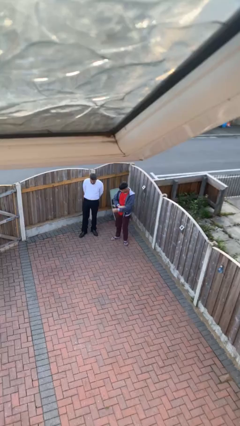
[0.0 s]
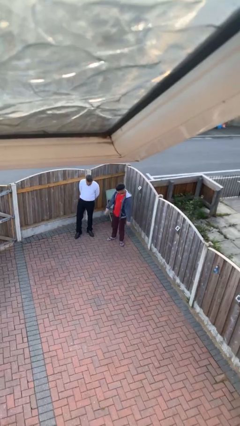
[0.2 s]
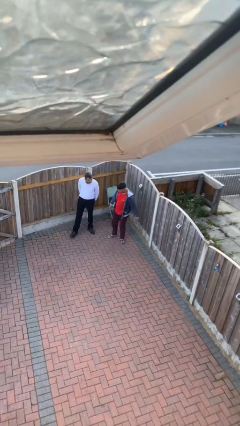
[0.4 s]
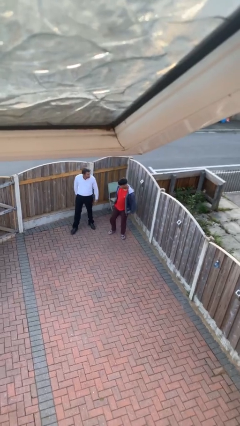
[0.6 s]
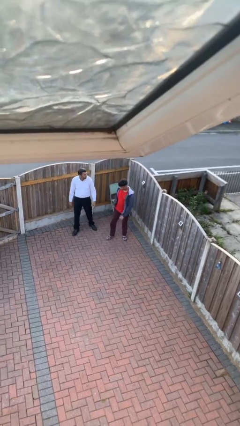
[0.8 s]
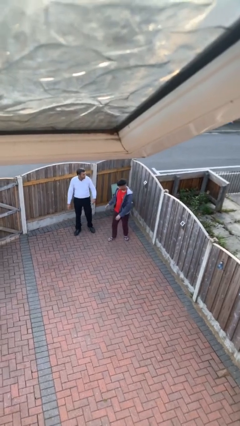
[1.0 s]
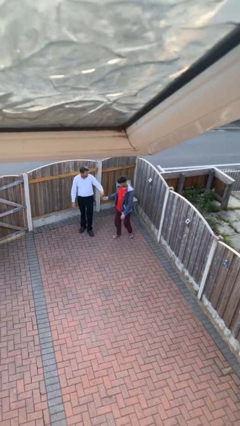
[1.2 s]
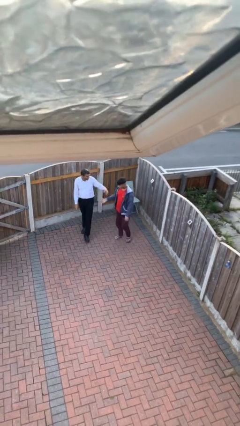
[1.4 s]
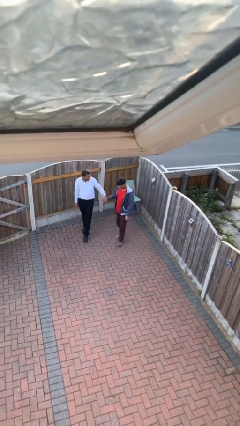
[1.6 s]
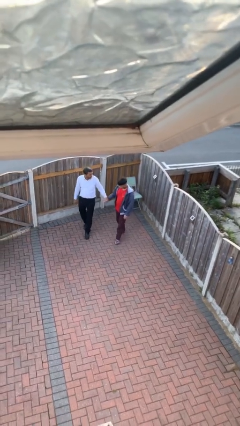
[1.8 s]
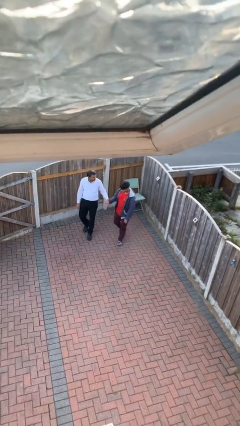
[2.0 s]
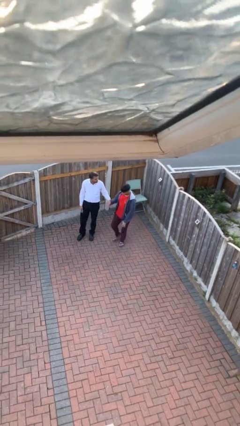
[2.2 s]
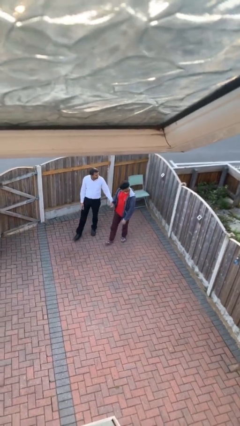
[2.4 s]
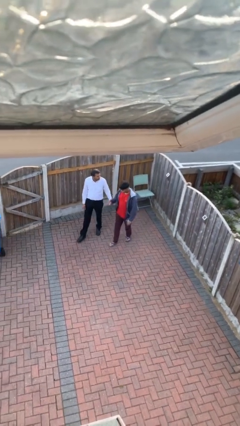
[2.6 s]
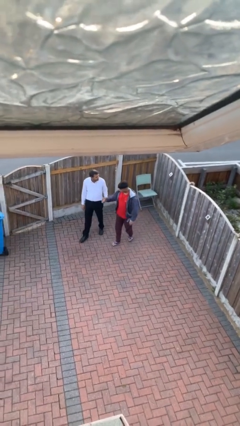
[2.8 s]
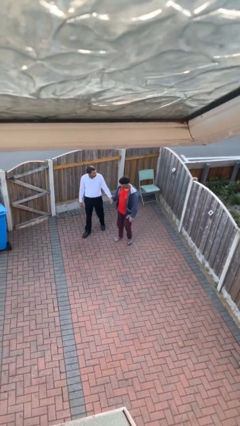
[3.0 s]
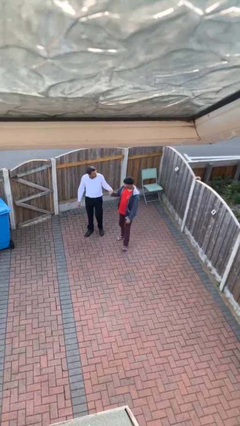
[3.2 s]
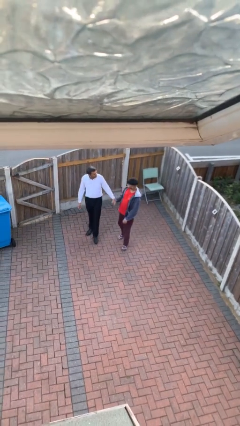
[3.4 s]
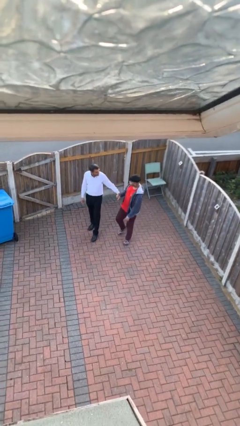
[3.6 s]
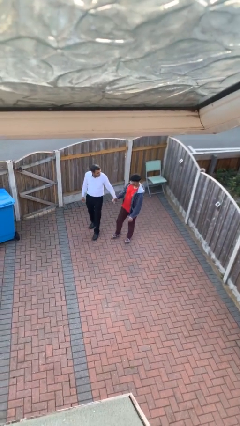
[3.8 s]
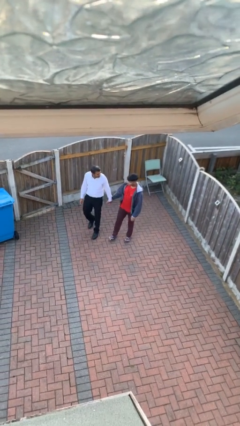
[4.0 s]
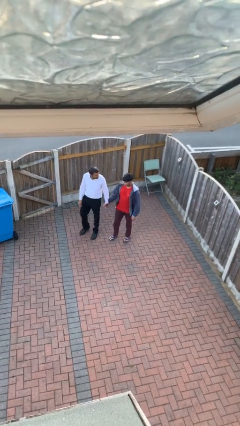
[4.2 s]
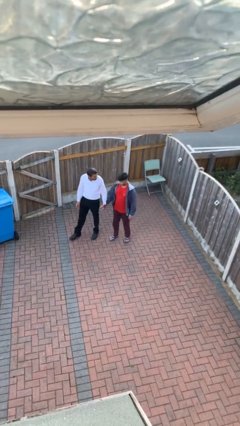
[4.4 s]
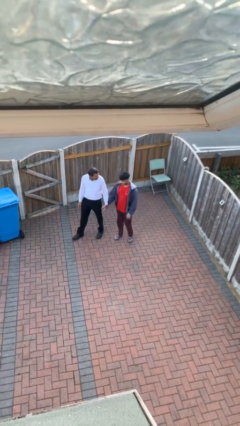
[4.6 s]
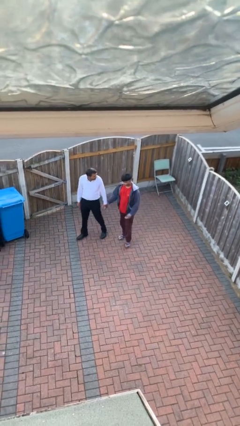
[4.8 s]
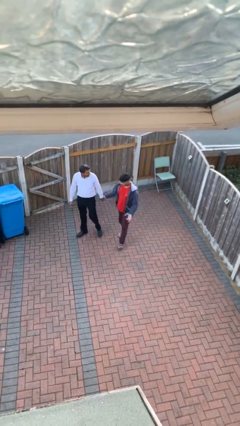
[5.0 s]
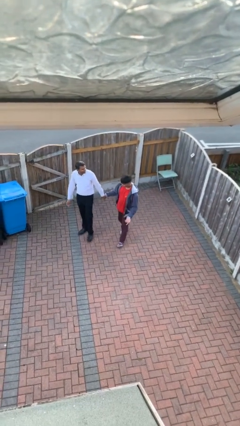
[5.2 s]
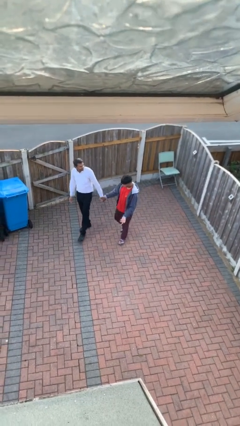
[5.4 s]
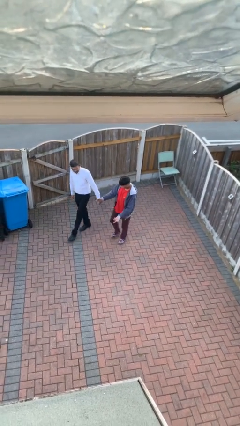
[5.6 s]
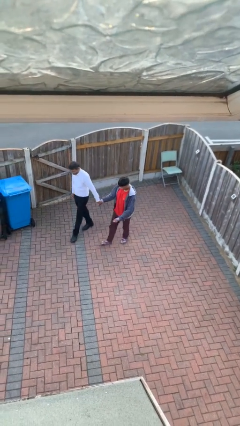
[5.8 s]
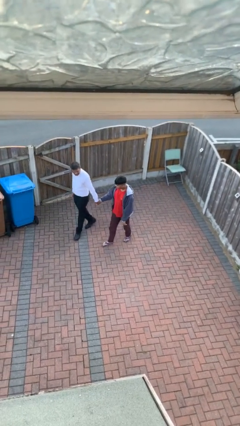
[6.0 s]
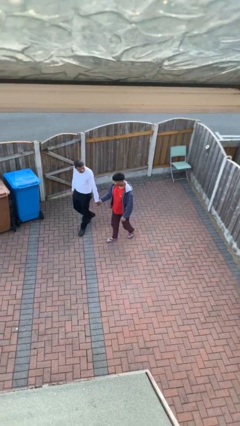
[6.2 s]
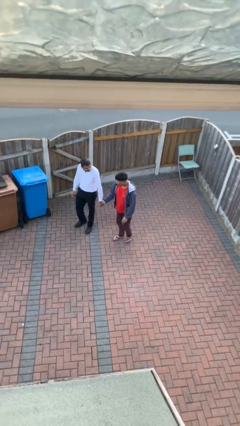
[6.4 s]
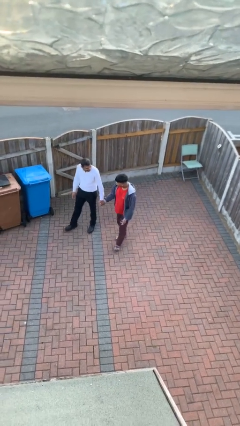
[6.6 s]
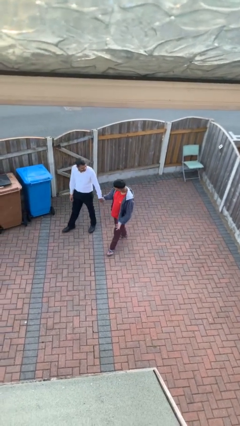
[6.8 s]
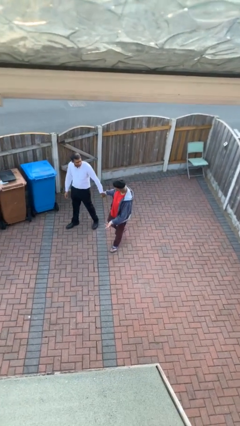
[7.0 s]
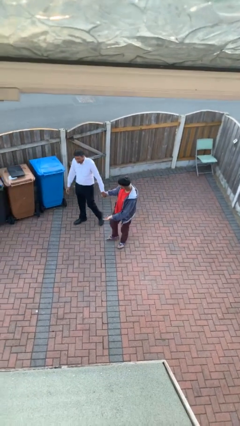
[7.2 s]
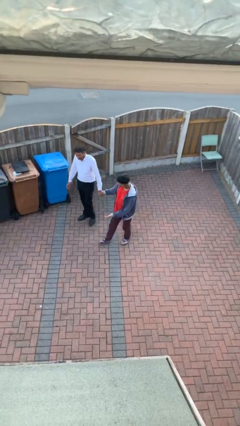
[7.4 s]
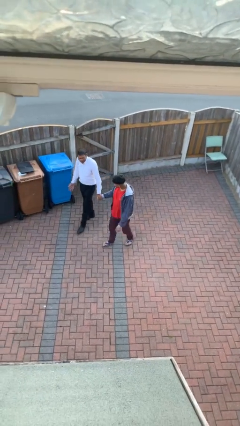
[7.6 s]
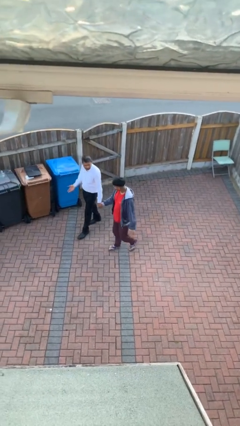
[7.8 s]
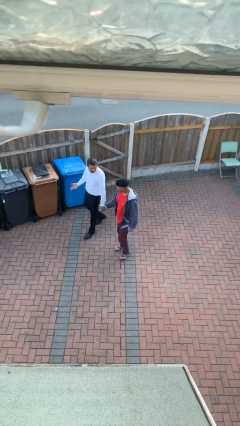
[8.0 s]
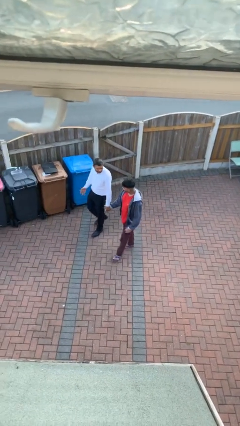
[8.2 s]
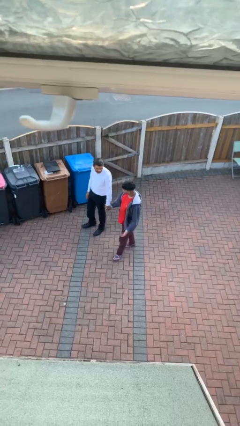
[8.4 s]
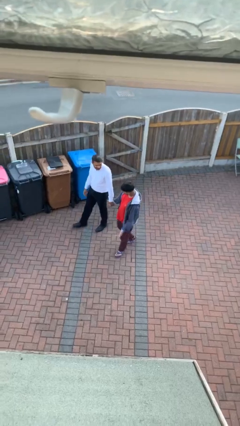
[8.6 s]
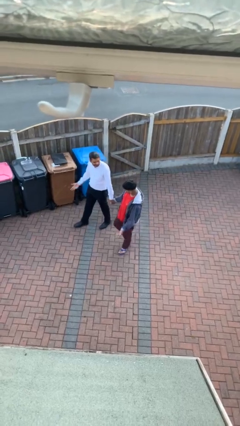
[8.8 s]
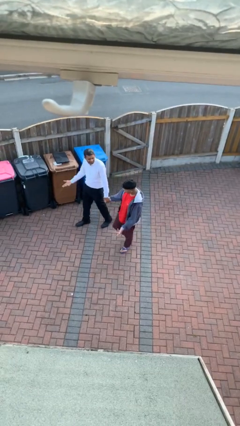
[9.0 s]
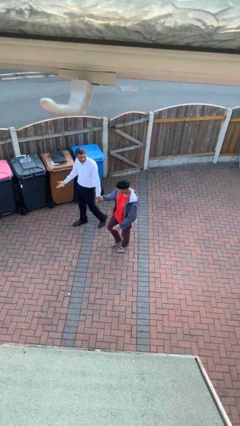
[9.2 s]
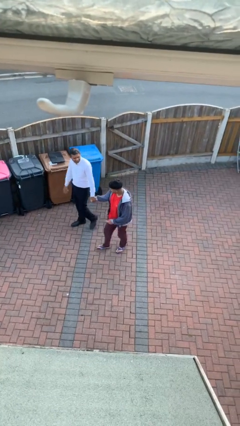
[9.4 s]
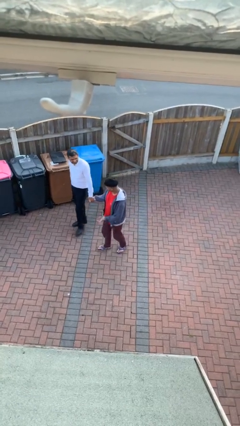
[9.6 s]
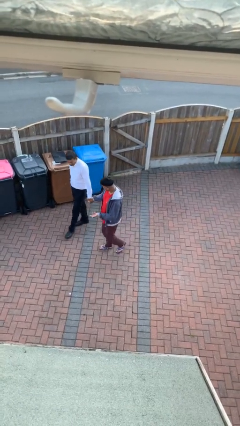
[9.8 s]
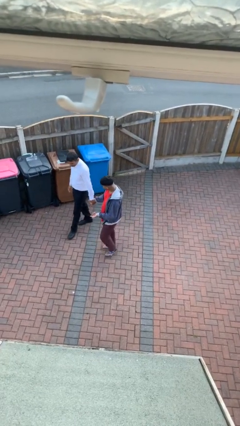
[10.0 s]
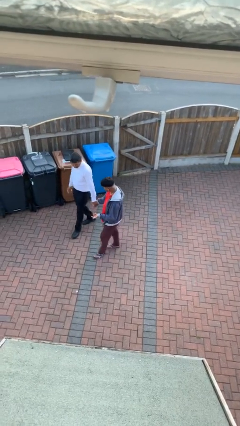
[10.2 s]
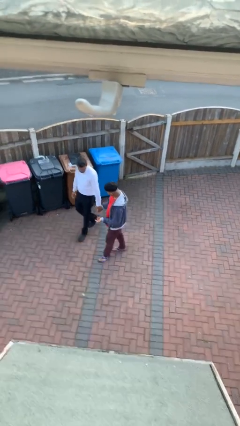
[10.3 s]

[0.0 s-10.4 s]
person holds hand

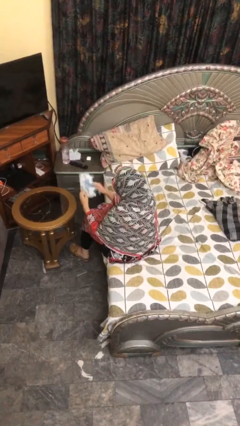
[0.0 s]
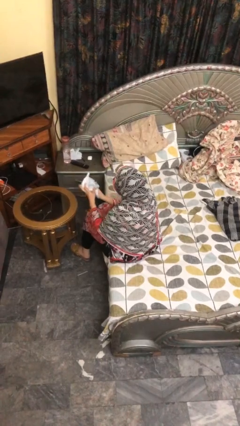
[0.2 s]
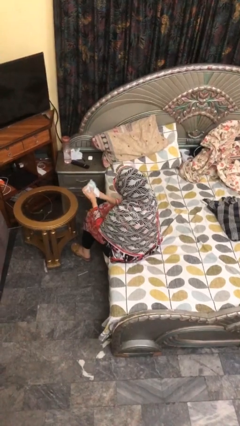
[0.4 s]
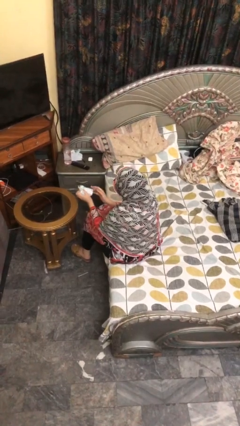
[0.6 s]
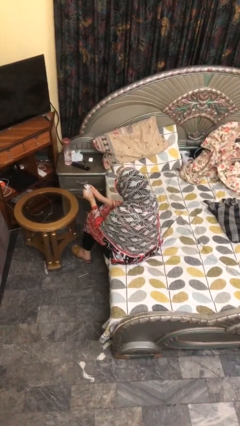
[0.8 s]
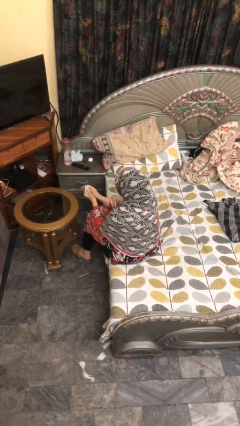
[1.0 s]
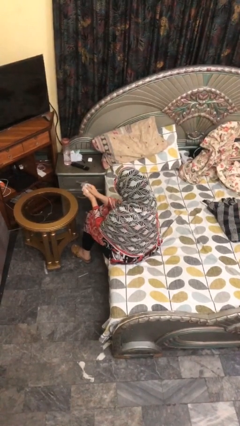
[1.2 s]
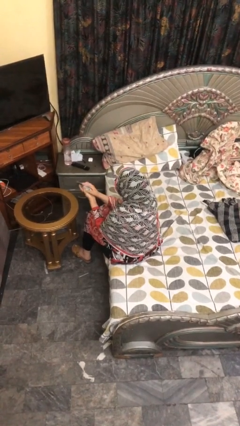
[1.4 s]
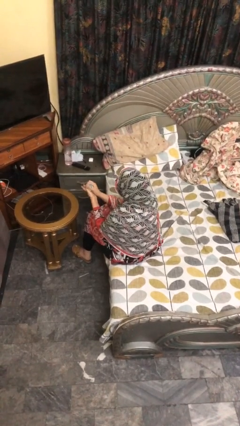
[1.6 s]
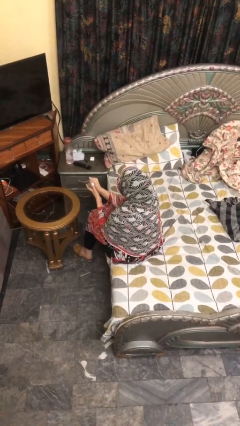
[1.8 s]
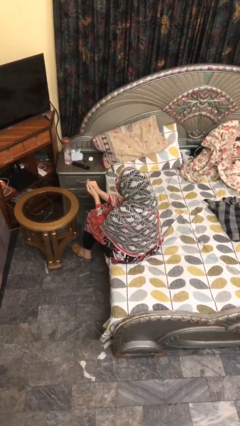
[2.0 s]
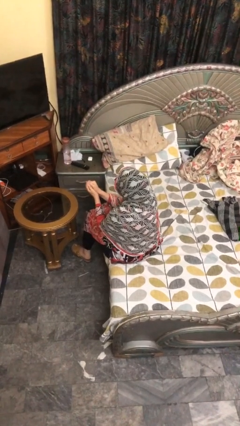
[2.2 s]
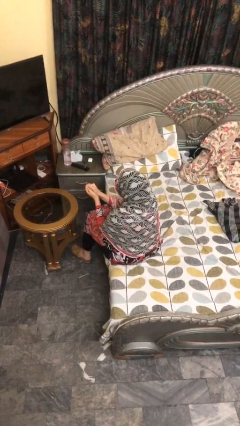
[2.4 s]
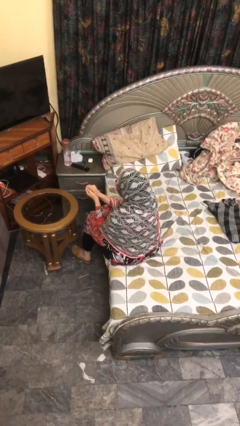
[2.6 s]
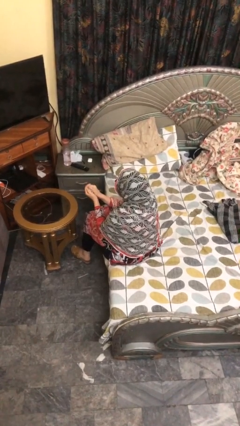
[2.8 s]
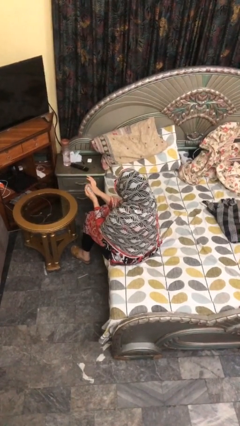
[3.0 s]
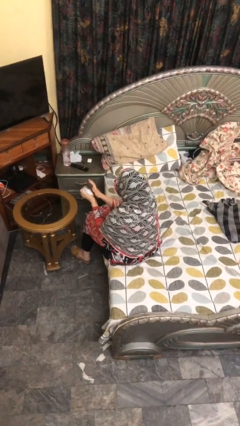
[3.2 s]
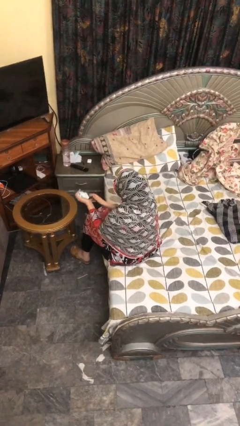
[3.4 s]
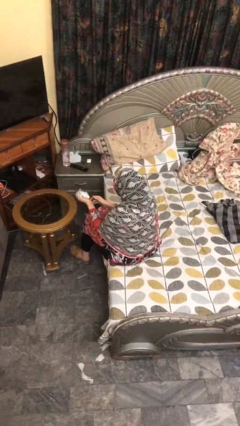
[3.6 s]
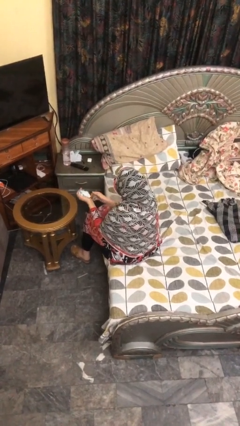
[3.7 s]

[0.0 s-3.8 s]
person crumples paper

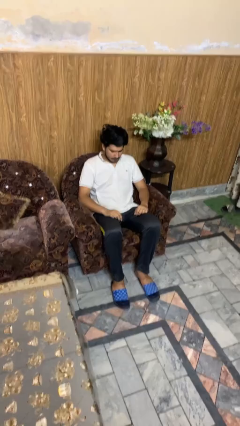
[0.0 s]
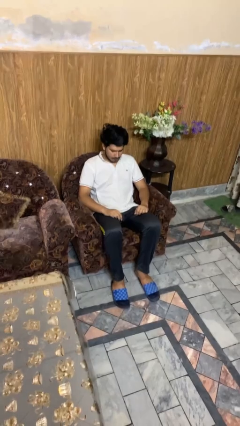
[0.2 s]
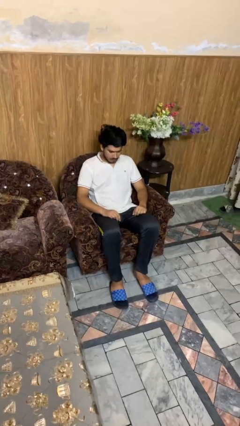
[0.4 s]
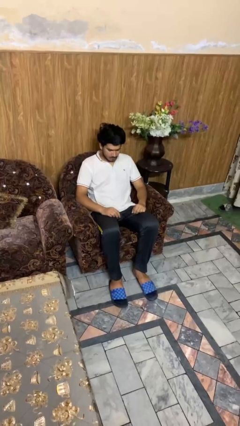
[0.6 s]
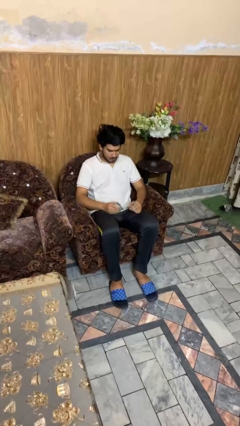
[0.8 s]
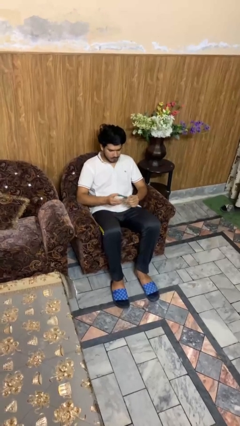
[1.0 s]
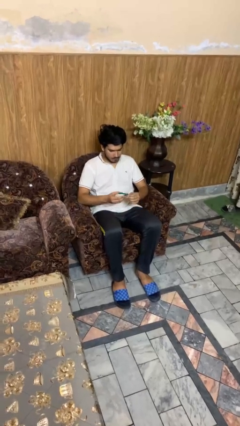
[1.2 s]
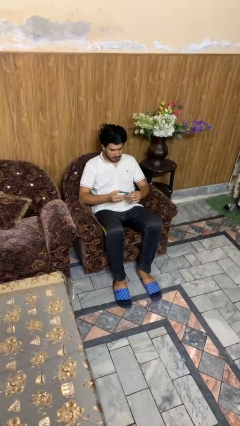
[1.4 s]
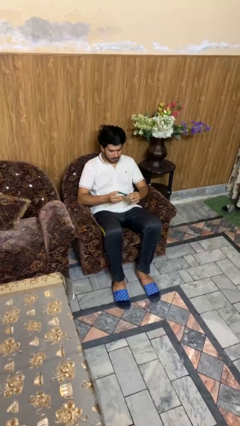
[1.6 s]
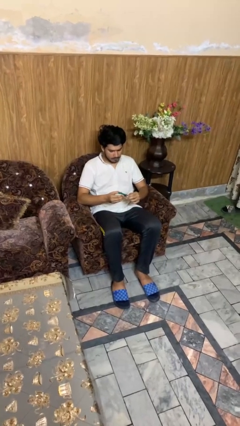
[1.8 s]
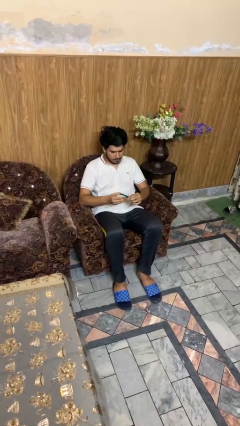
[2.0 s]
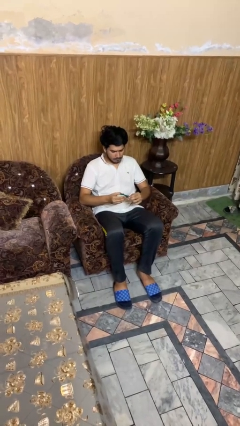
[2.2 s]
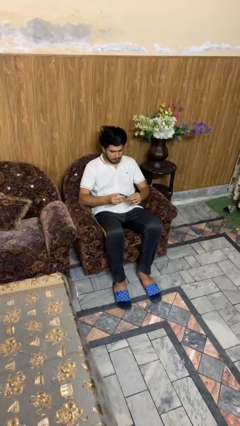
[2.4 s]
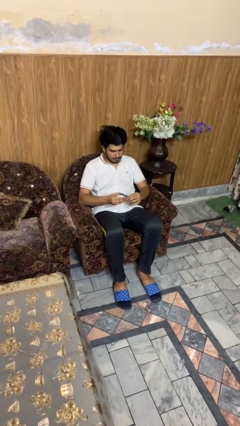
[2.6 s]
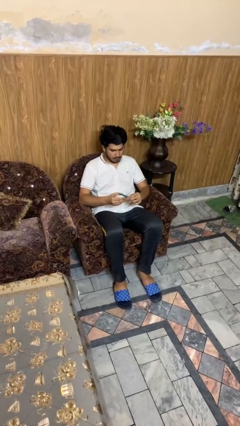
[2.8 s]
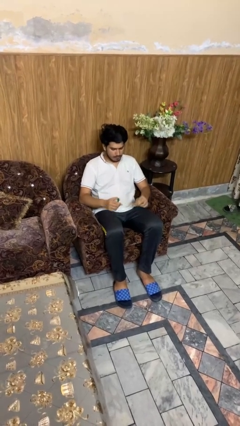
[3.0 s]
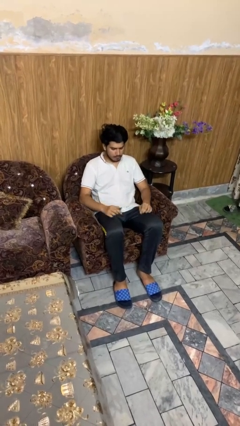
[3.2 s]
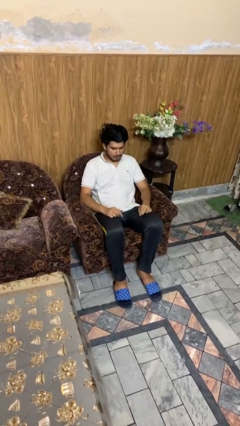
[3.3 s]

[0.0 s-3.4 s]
person clips fingernails

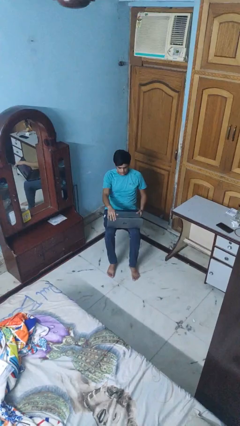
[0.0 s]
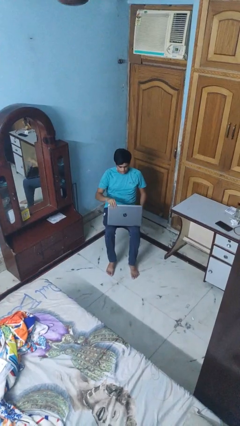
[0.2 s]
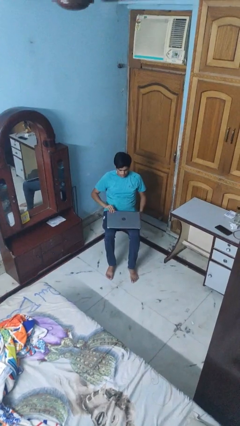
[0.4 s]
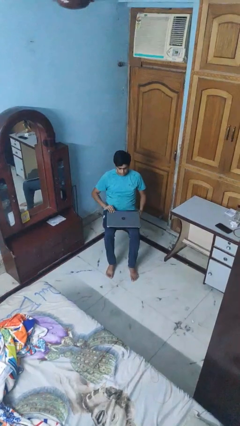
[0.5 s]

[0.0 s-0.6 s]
person closes laptop
